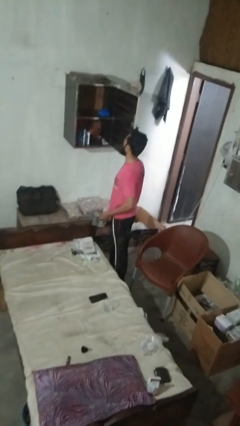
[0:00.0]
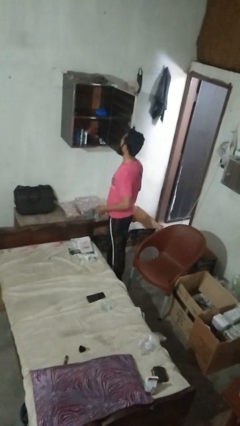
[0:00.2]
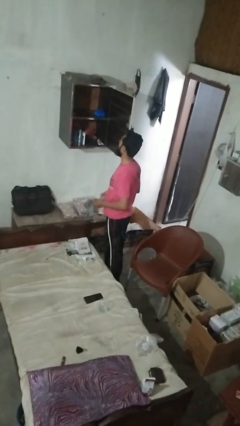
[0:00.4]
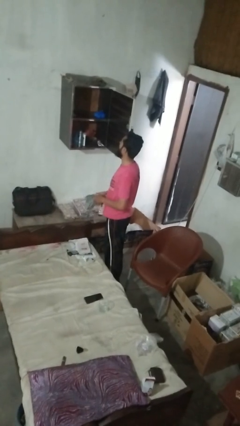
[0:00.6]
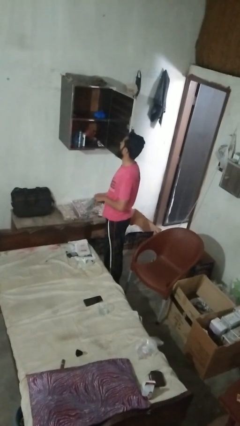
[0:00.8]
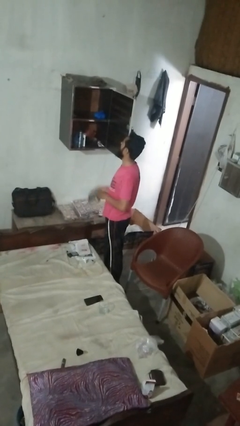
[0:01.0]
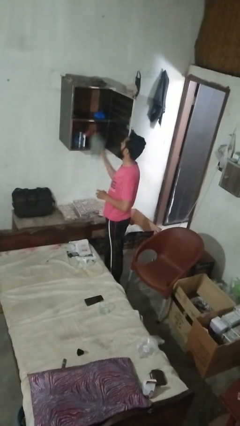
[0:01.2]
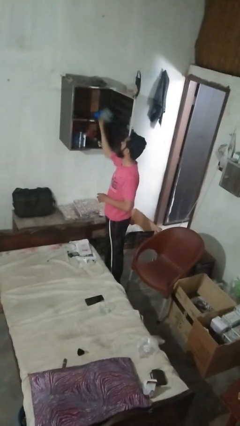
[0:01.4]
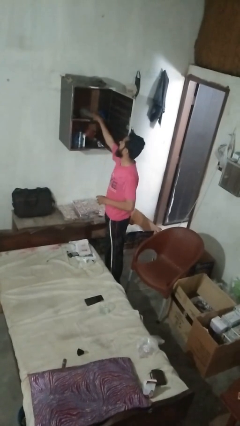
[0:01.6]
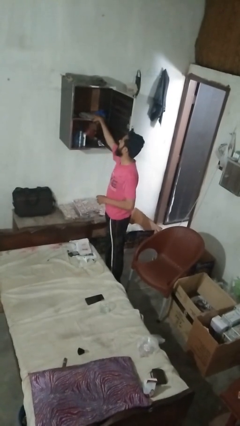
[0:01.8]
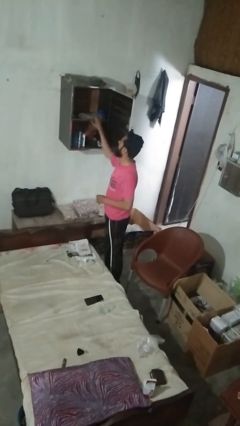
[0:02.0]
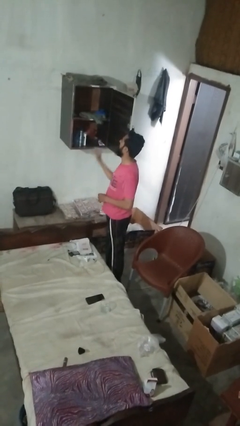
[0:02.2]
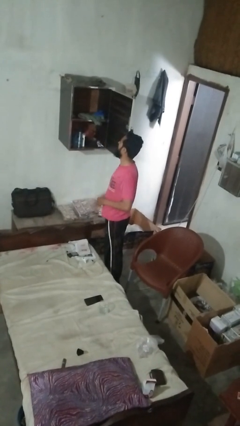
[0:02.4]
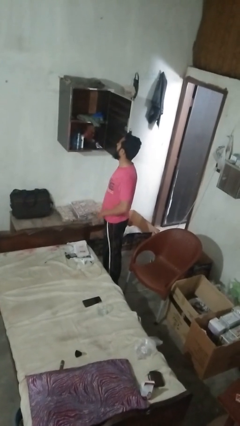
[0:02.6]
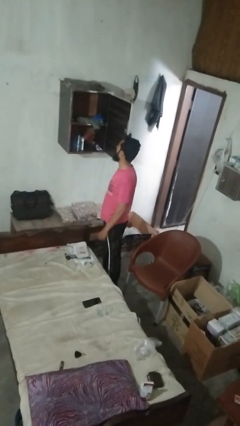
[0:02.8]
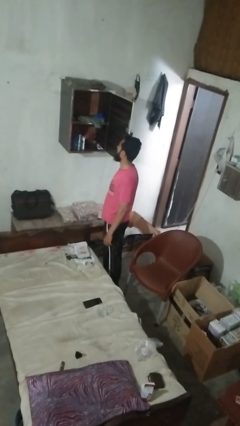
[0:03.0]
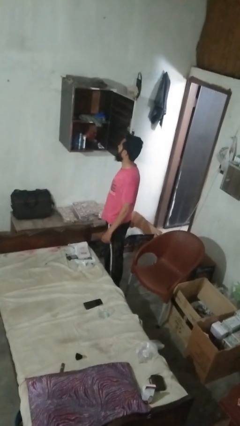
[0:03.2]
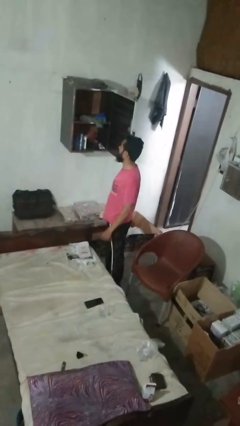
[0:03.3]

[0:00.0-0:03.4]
person puts clothes into dresser

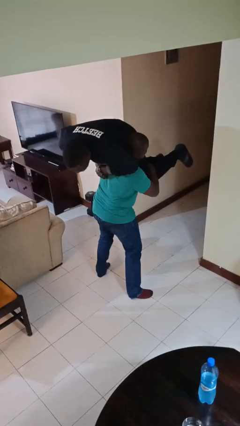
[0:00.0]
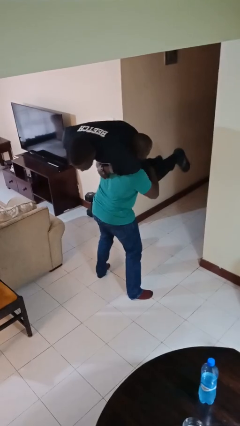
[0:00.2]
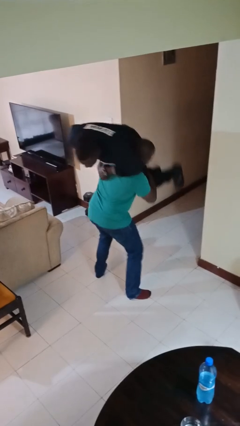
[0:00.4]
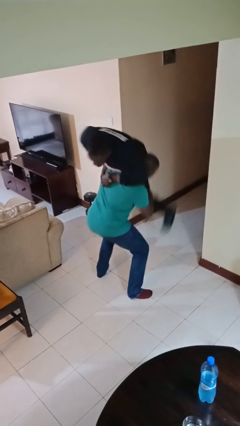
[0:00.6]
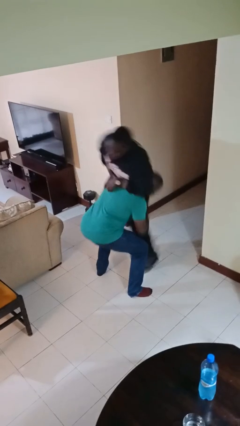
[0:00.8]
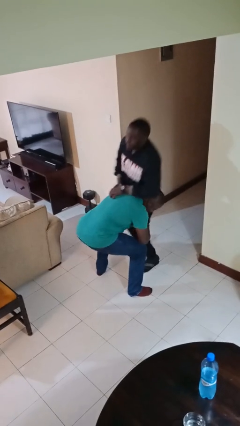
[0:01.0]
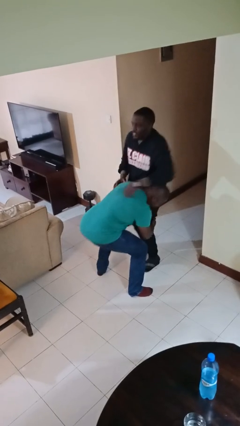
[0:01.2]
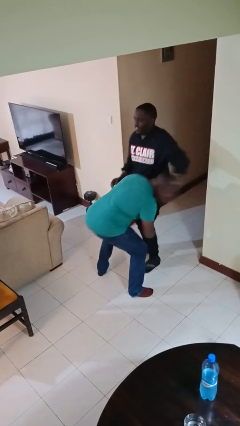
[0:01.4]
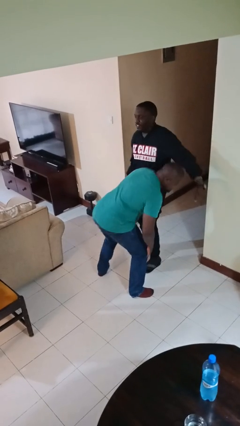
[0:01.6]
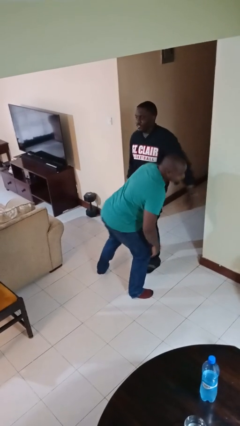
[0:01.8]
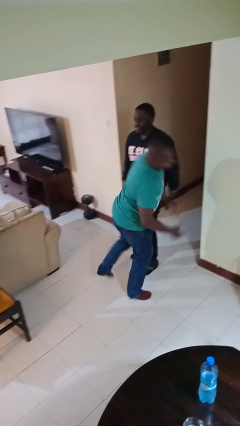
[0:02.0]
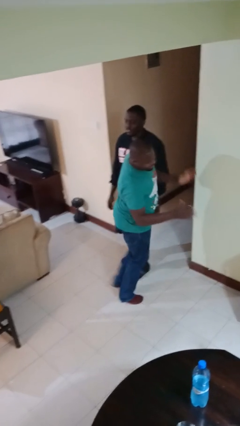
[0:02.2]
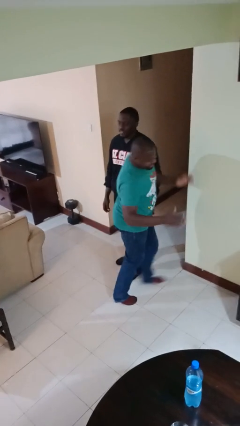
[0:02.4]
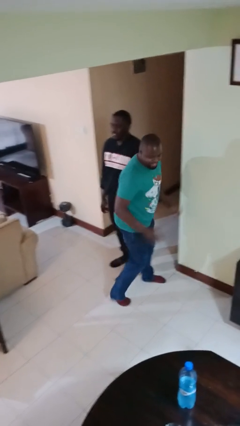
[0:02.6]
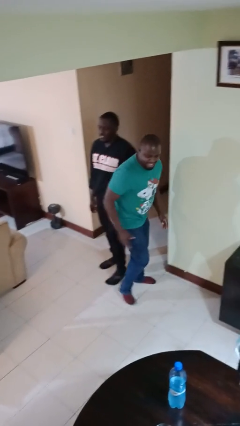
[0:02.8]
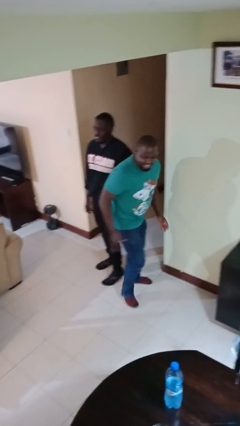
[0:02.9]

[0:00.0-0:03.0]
person puts down person

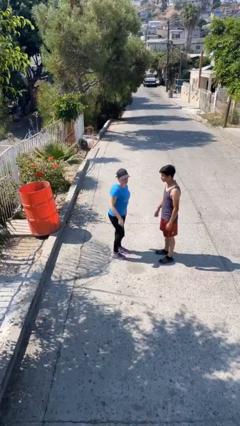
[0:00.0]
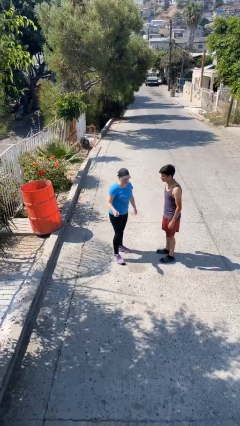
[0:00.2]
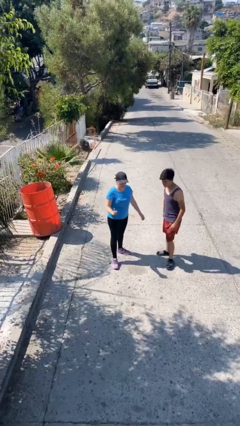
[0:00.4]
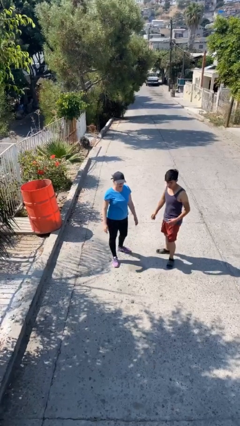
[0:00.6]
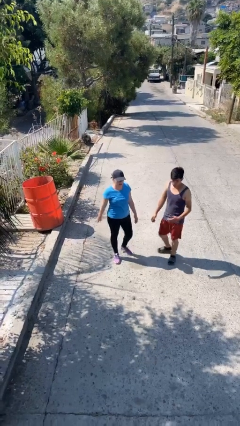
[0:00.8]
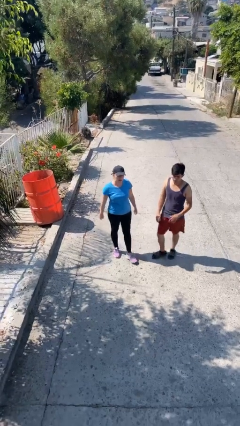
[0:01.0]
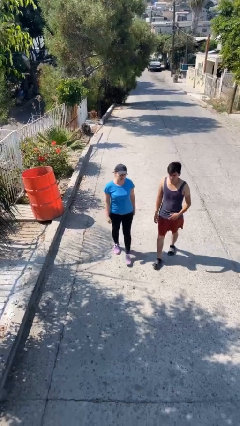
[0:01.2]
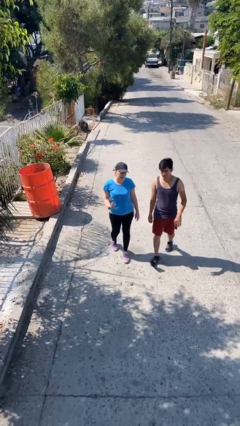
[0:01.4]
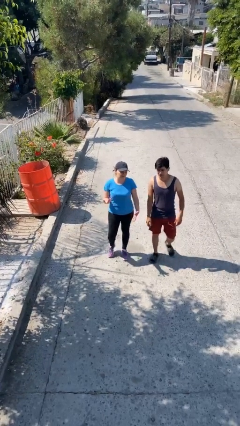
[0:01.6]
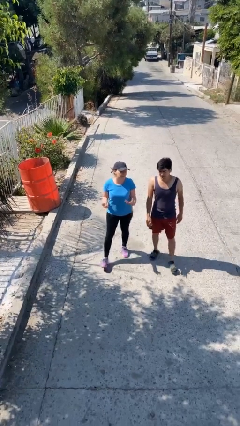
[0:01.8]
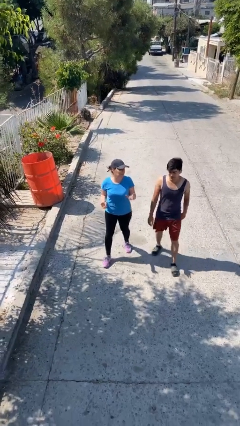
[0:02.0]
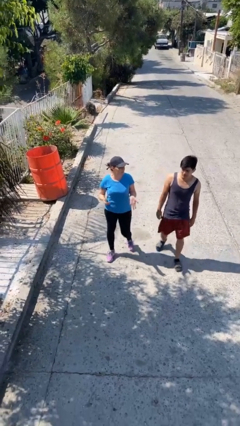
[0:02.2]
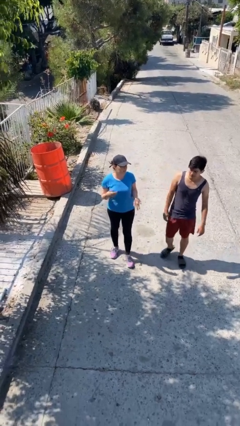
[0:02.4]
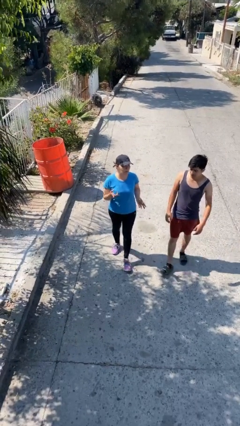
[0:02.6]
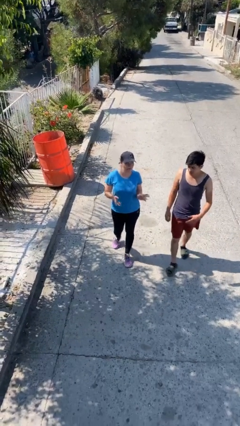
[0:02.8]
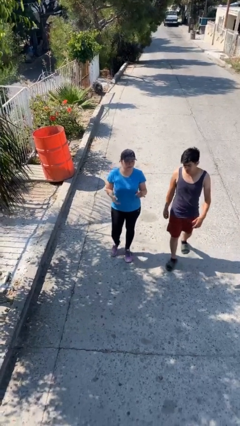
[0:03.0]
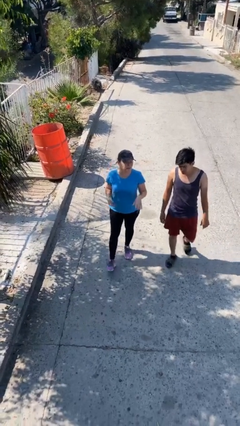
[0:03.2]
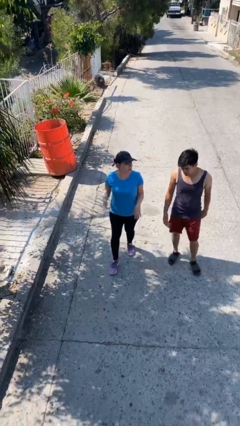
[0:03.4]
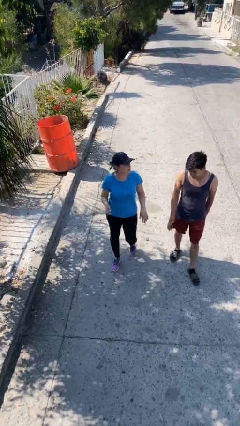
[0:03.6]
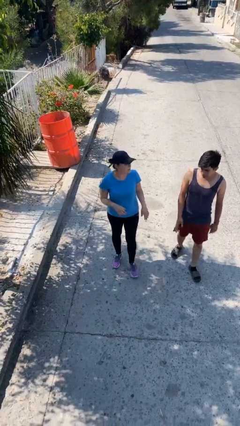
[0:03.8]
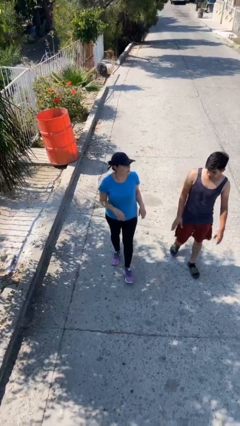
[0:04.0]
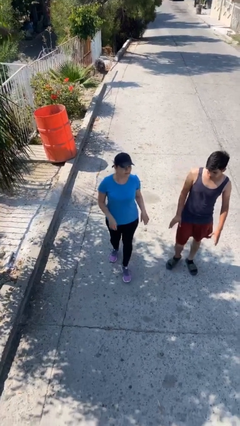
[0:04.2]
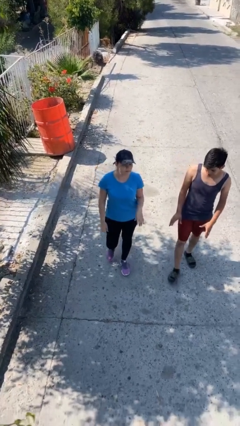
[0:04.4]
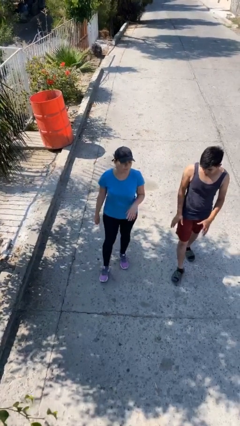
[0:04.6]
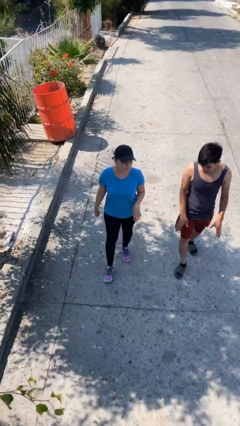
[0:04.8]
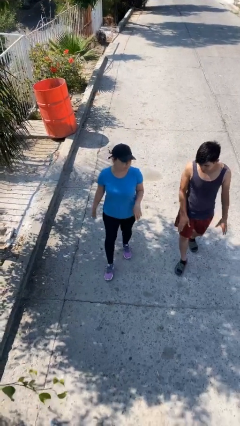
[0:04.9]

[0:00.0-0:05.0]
person talks to person

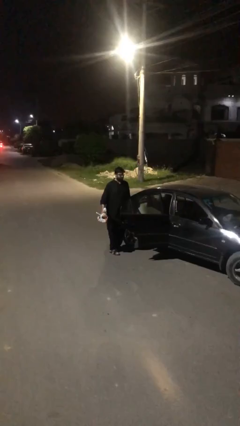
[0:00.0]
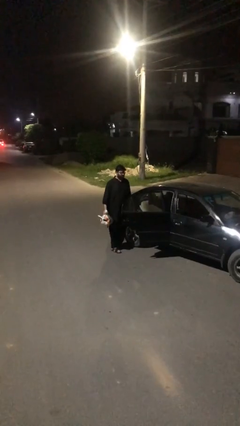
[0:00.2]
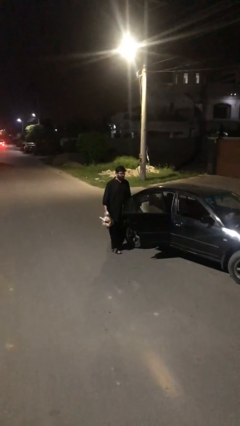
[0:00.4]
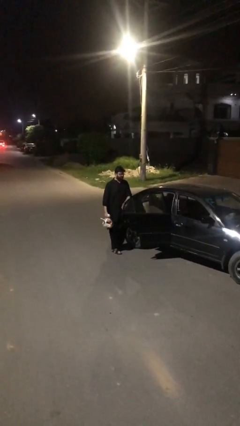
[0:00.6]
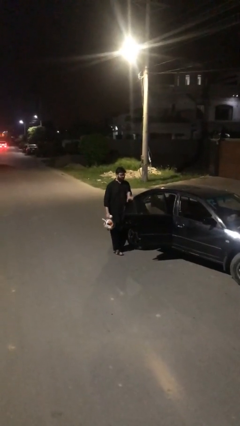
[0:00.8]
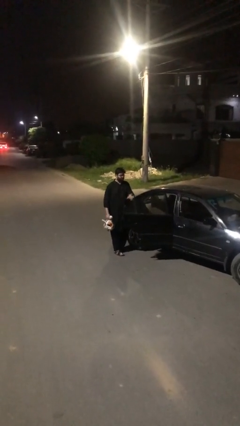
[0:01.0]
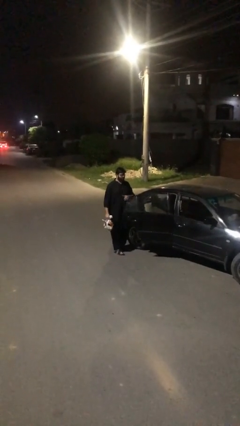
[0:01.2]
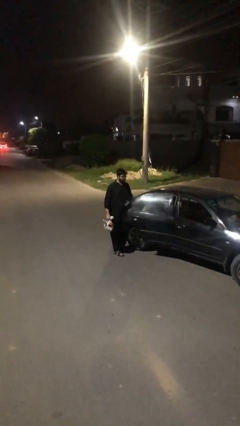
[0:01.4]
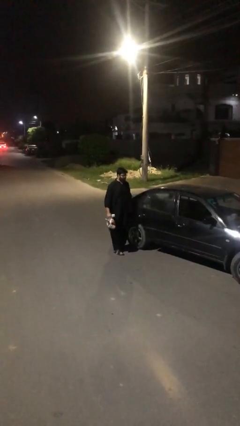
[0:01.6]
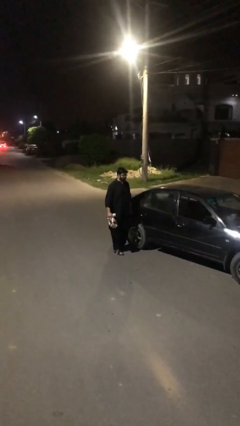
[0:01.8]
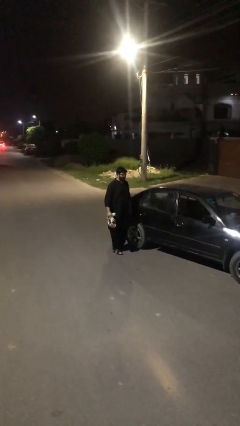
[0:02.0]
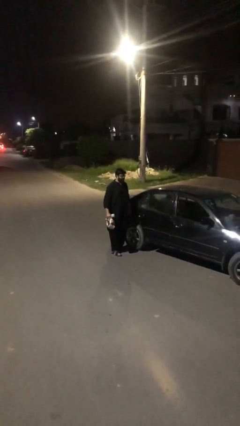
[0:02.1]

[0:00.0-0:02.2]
person closes car door

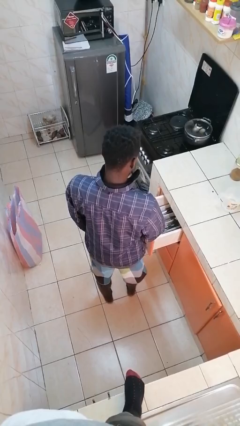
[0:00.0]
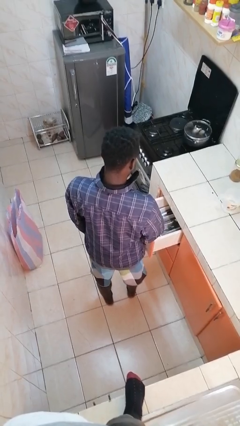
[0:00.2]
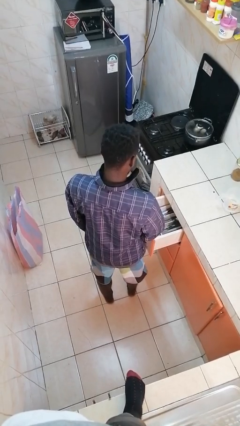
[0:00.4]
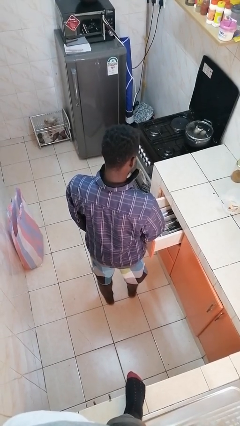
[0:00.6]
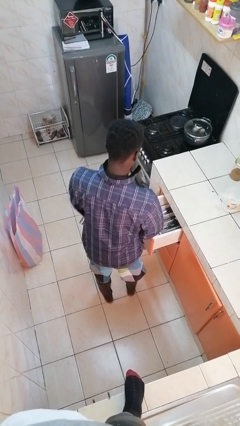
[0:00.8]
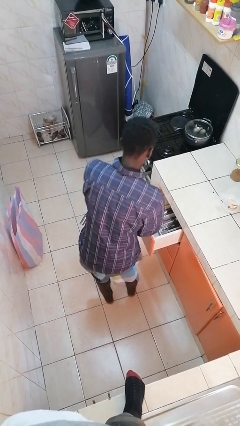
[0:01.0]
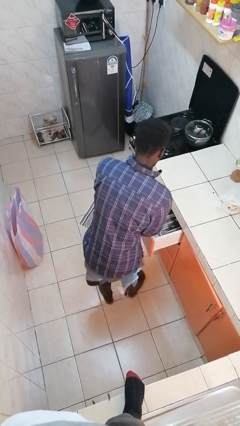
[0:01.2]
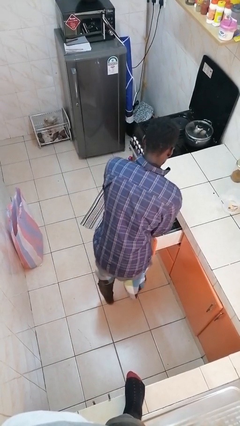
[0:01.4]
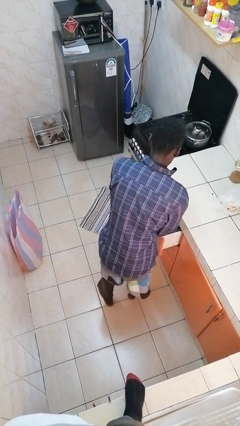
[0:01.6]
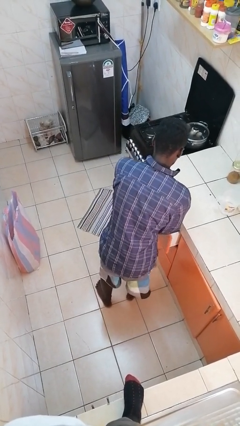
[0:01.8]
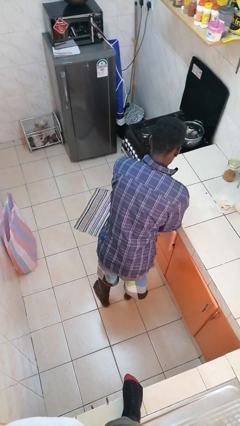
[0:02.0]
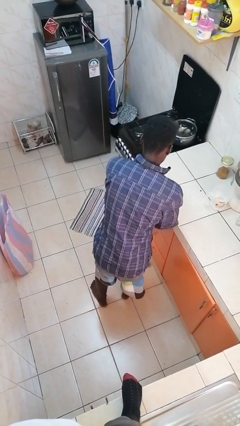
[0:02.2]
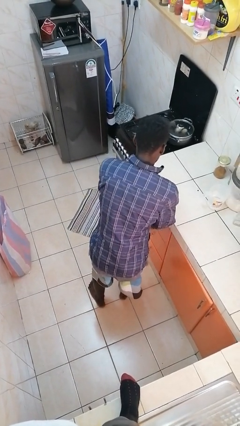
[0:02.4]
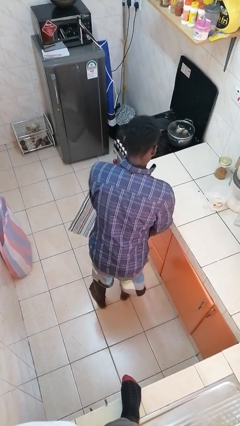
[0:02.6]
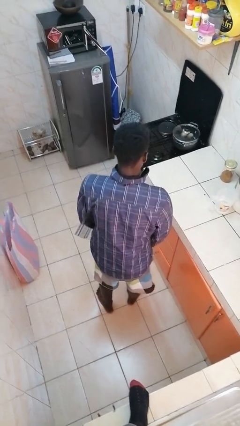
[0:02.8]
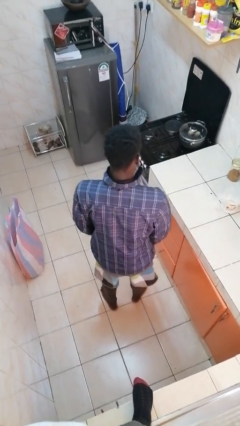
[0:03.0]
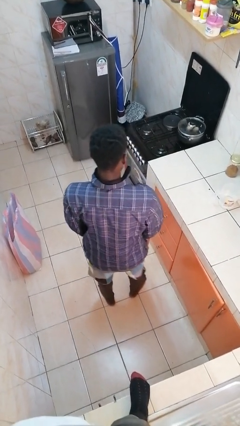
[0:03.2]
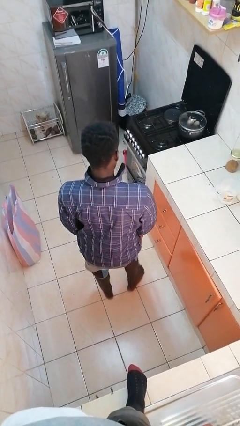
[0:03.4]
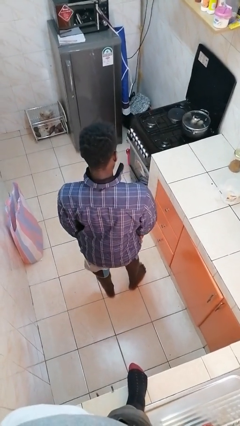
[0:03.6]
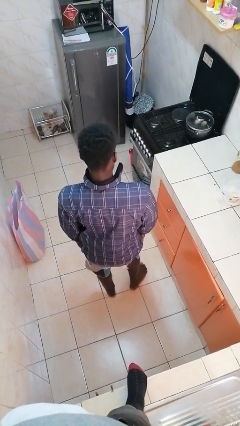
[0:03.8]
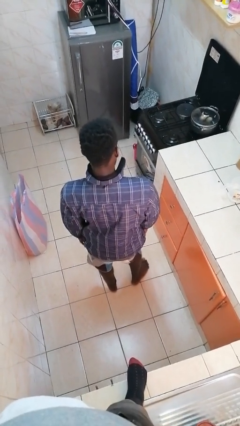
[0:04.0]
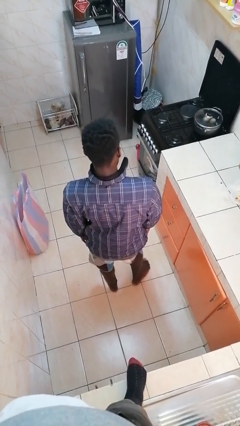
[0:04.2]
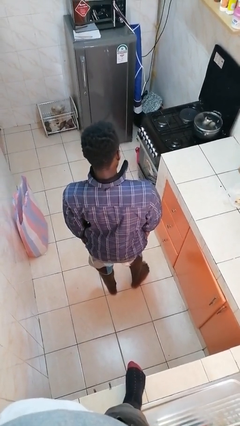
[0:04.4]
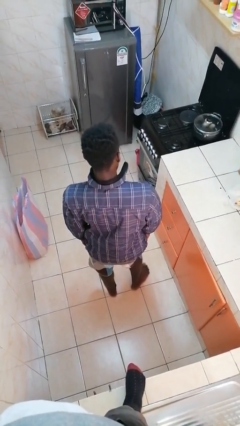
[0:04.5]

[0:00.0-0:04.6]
person closes kitchen drawer
